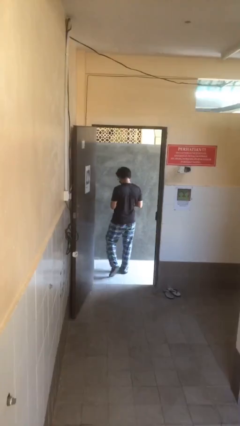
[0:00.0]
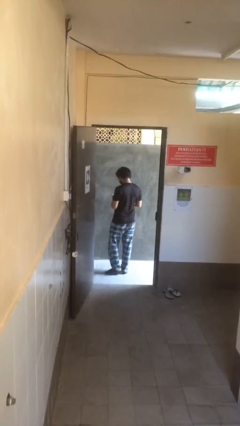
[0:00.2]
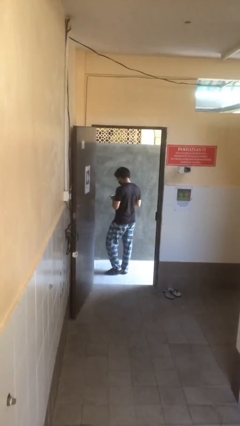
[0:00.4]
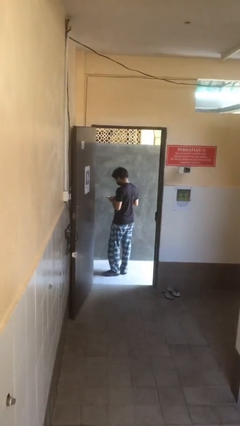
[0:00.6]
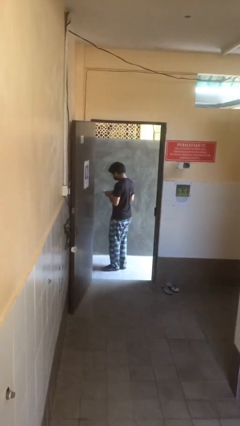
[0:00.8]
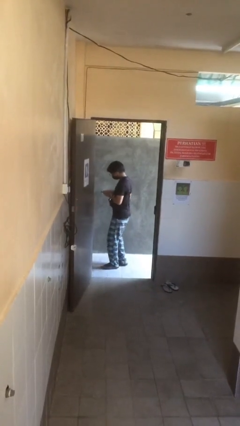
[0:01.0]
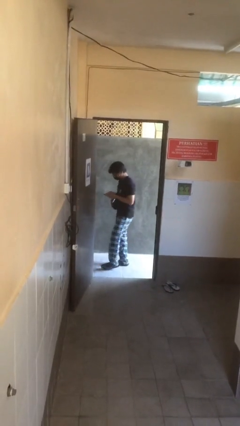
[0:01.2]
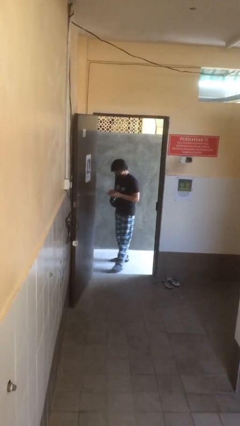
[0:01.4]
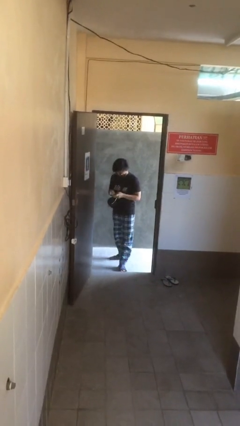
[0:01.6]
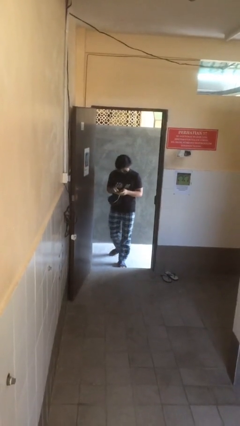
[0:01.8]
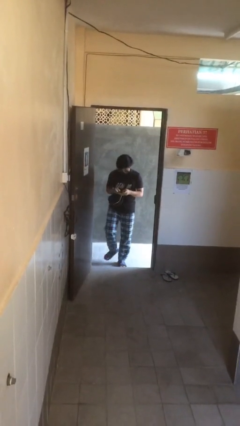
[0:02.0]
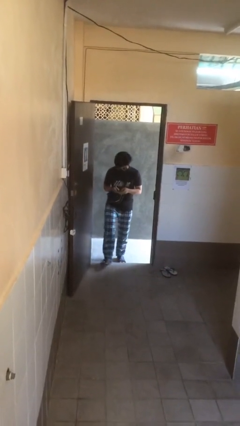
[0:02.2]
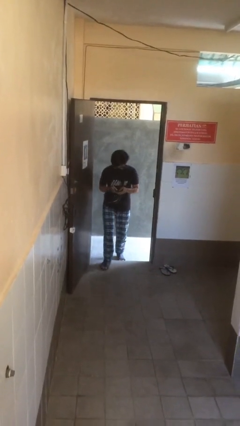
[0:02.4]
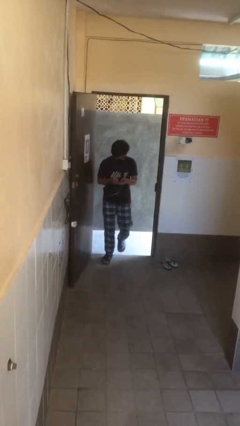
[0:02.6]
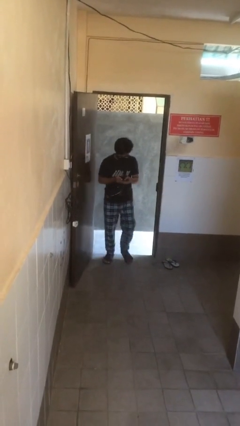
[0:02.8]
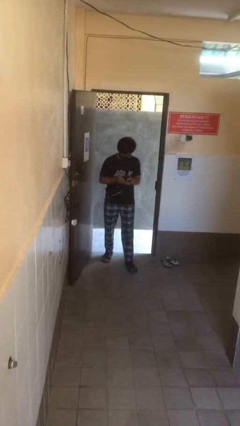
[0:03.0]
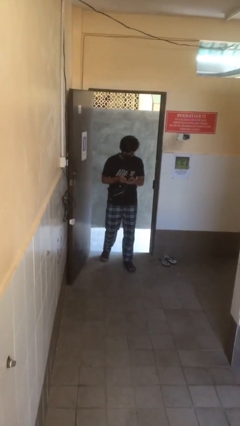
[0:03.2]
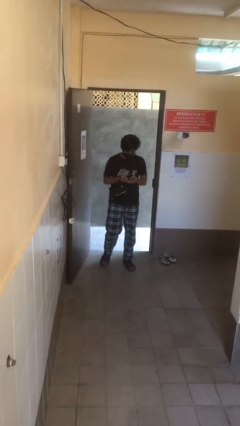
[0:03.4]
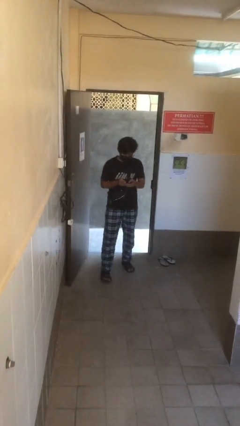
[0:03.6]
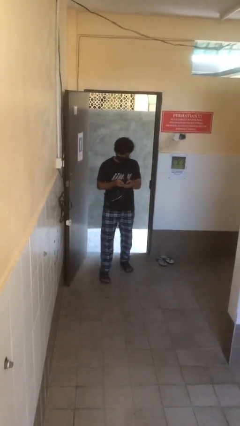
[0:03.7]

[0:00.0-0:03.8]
person enters scene through structure

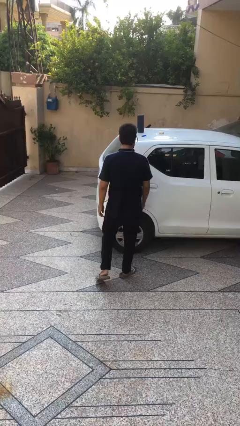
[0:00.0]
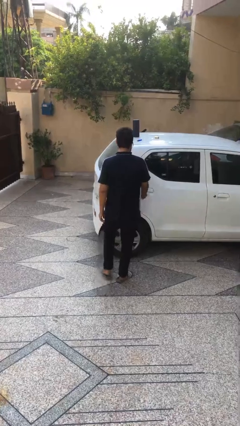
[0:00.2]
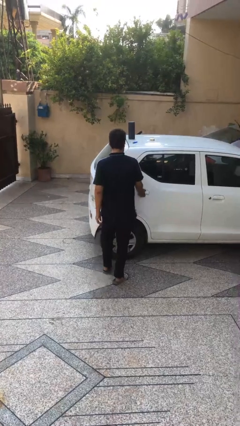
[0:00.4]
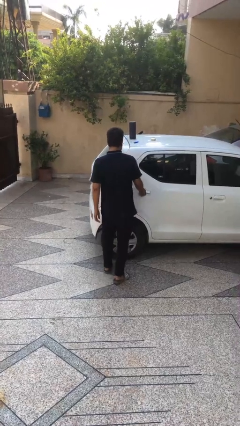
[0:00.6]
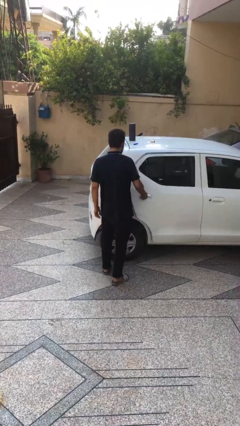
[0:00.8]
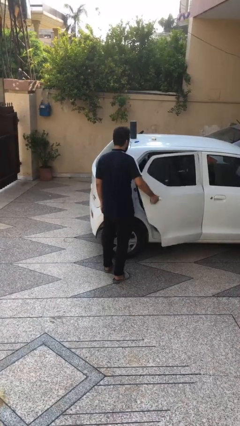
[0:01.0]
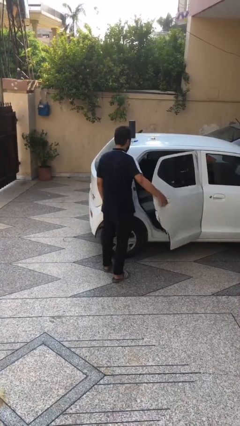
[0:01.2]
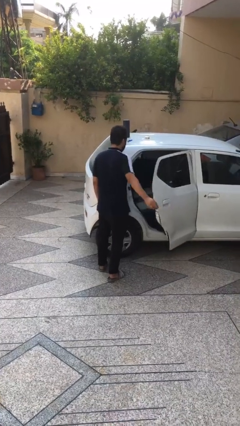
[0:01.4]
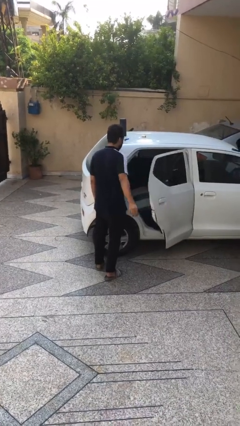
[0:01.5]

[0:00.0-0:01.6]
person opens car door

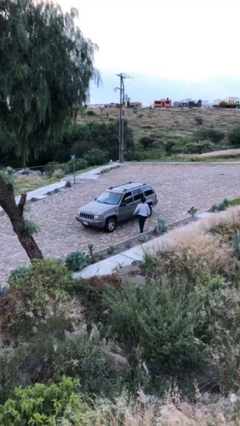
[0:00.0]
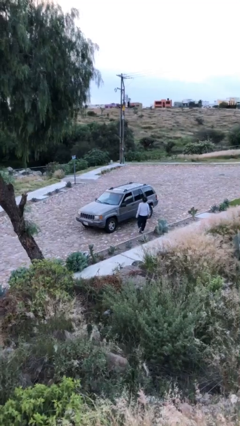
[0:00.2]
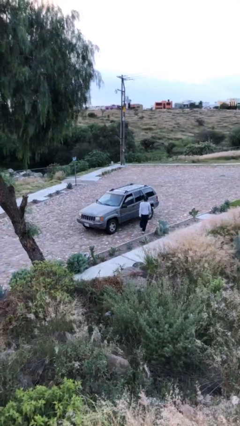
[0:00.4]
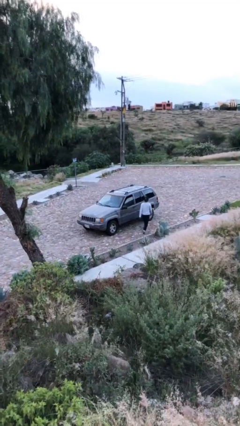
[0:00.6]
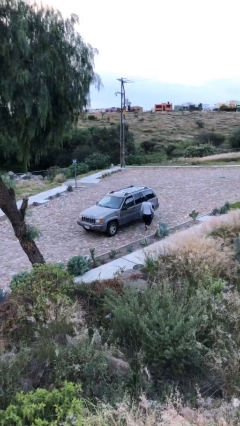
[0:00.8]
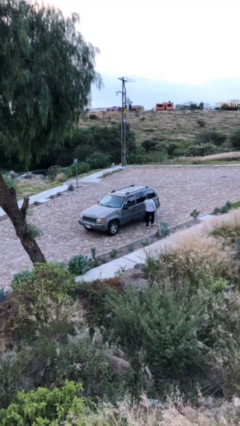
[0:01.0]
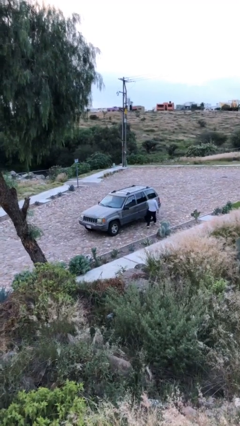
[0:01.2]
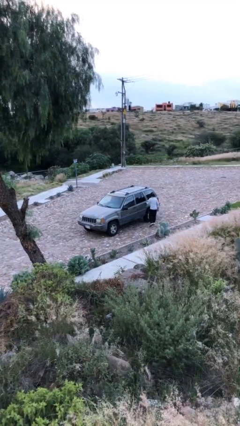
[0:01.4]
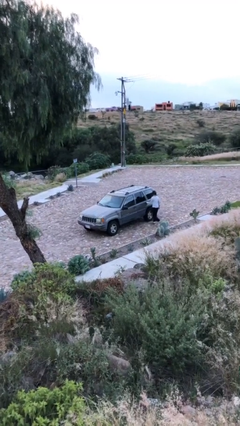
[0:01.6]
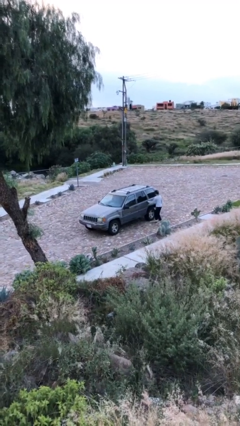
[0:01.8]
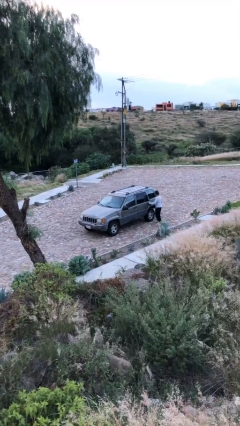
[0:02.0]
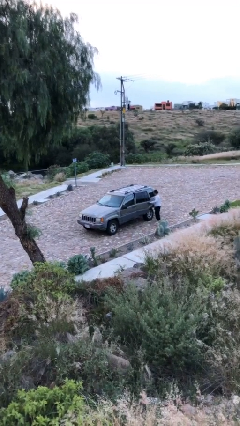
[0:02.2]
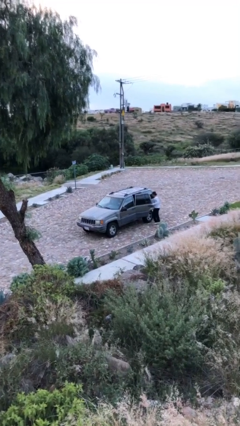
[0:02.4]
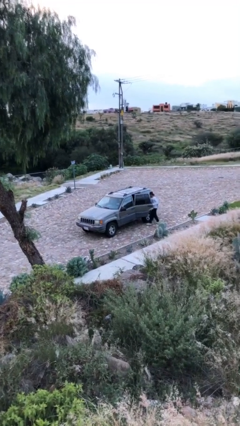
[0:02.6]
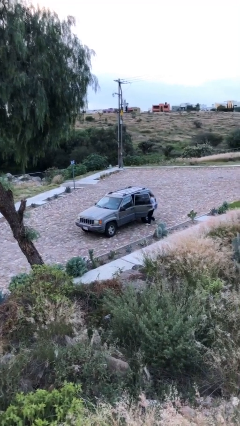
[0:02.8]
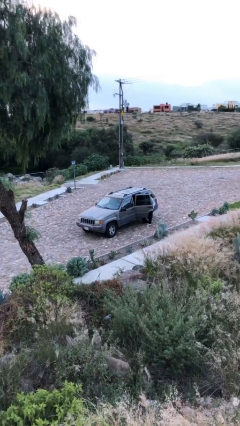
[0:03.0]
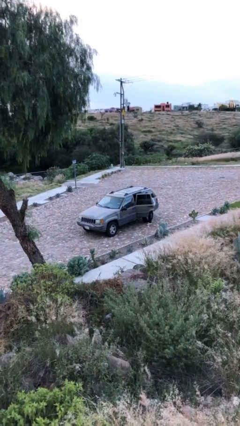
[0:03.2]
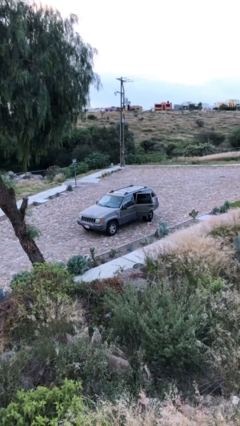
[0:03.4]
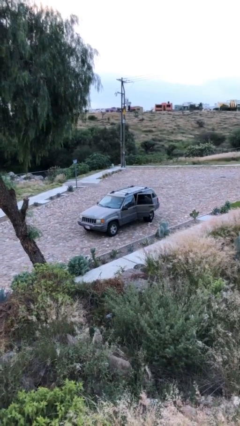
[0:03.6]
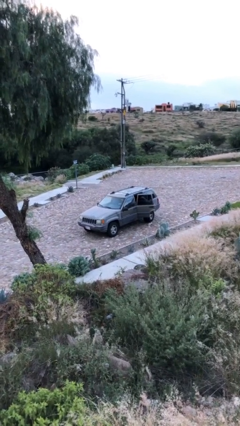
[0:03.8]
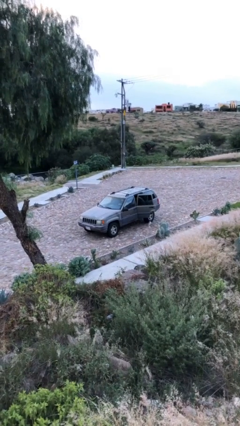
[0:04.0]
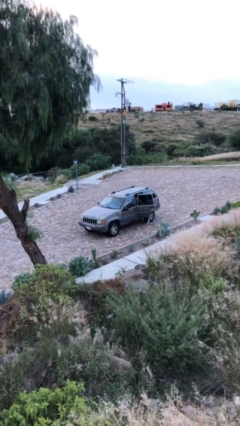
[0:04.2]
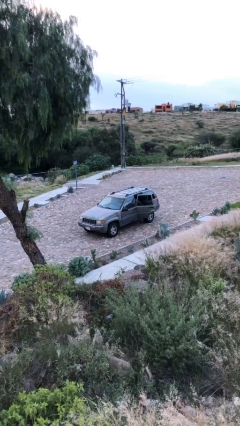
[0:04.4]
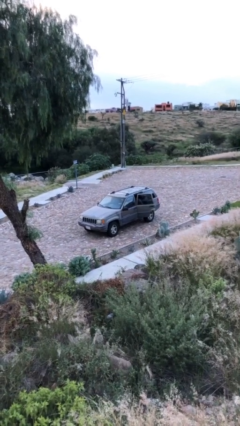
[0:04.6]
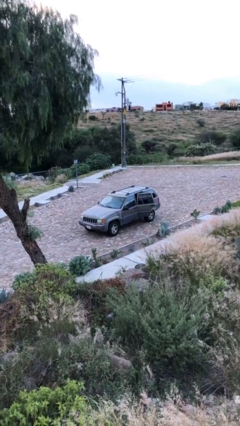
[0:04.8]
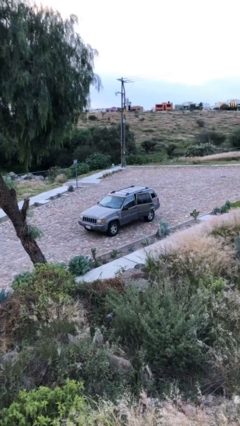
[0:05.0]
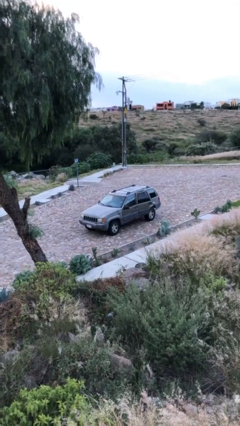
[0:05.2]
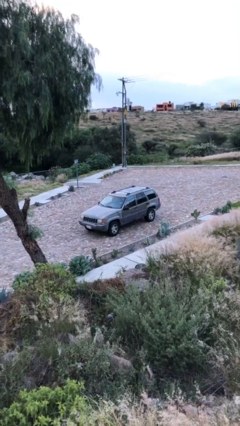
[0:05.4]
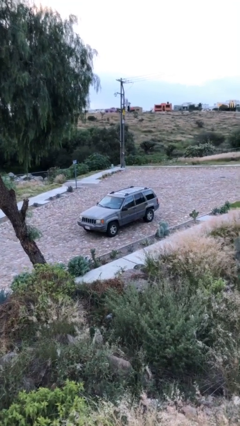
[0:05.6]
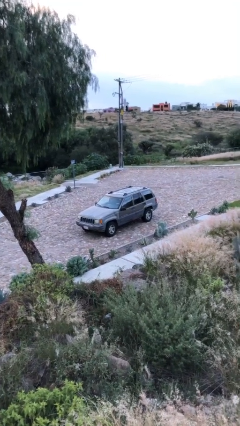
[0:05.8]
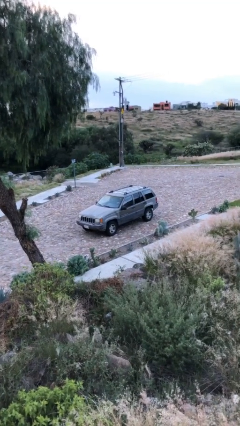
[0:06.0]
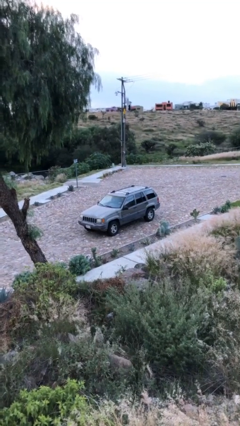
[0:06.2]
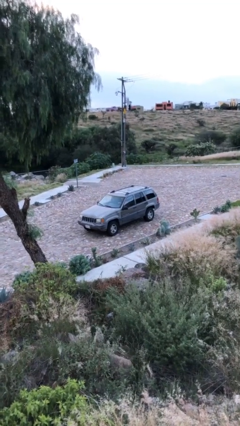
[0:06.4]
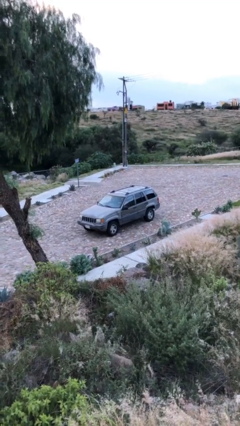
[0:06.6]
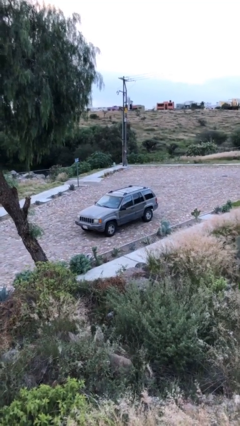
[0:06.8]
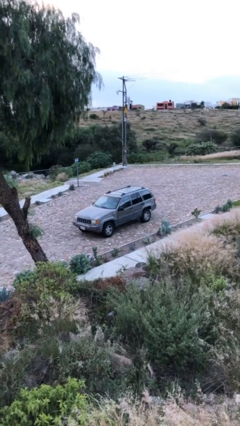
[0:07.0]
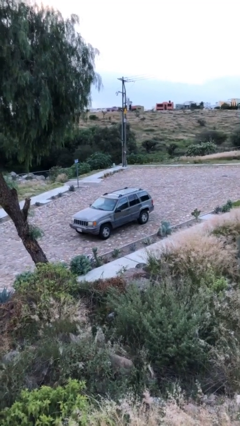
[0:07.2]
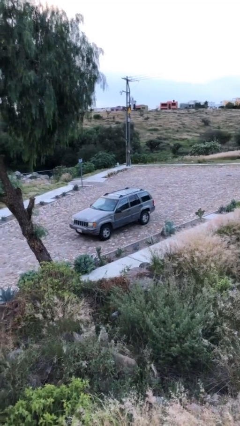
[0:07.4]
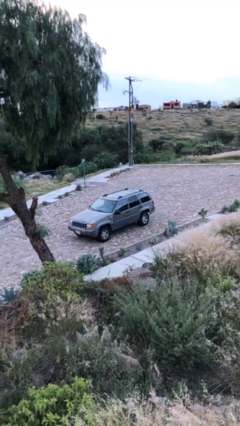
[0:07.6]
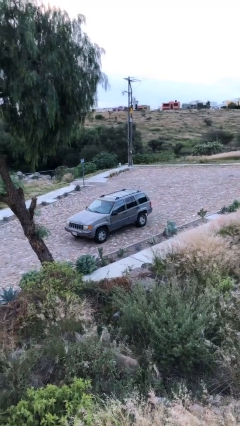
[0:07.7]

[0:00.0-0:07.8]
car picks up person

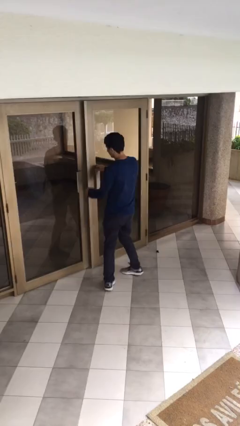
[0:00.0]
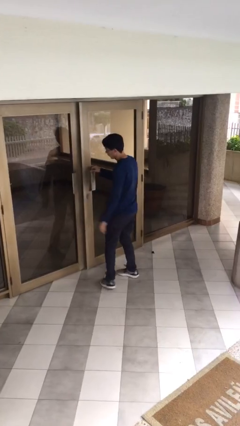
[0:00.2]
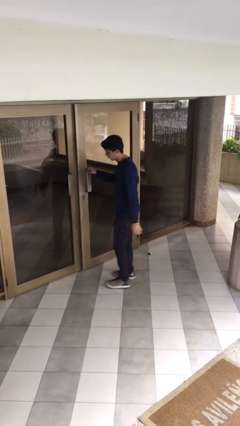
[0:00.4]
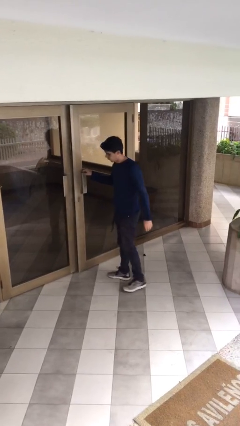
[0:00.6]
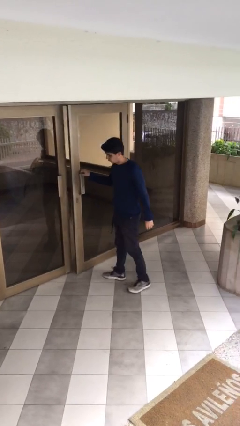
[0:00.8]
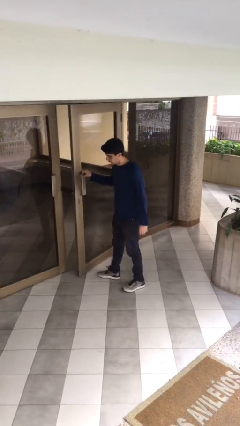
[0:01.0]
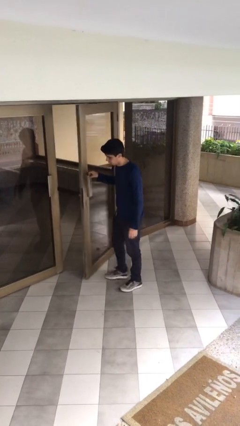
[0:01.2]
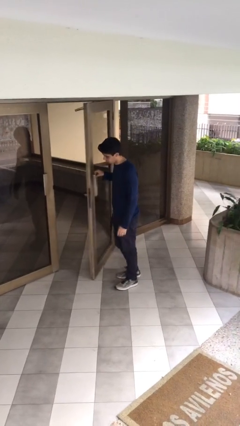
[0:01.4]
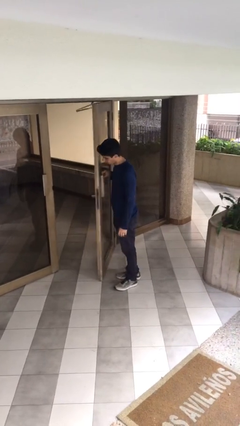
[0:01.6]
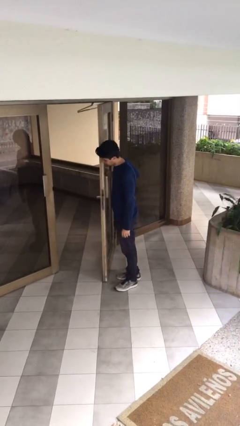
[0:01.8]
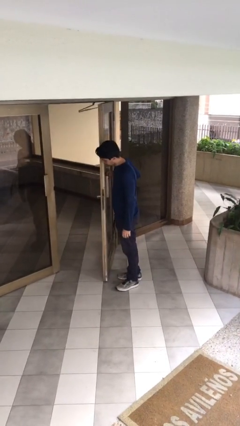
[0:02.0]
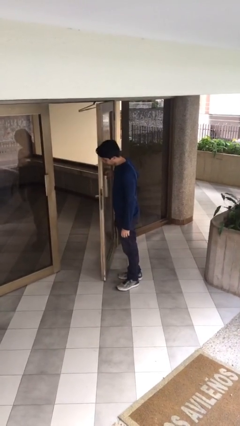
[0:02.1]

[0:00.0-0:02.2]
person opens facility door

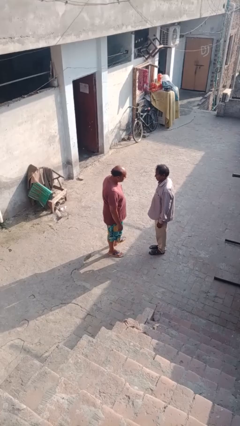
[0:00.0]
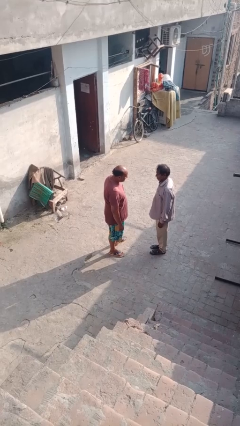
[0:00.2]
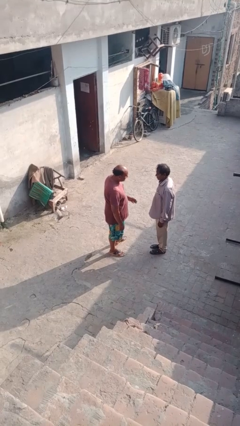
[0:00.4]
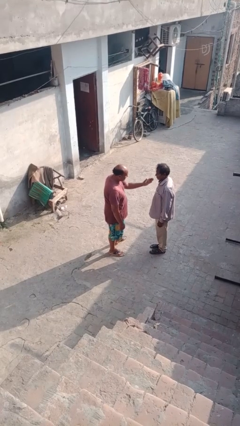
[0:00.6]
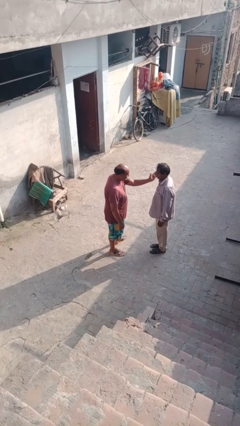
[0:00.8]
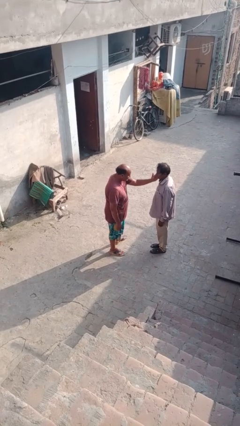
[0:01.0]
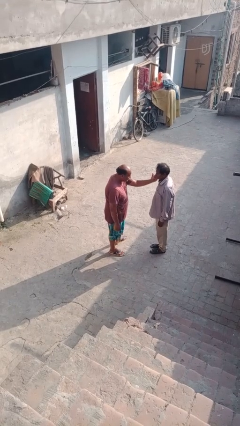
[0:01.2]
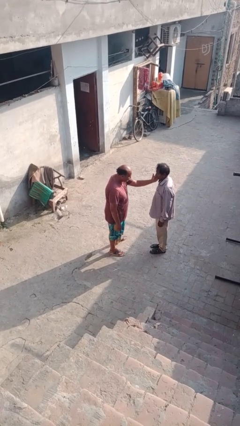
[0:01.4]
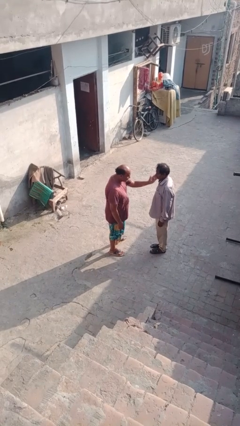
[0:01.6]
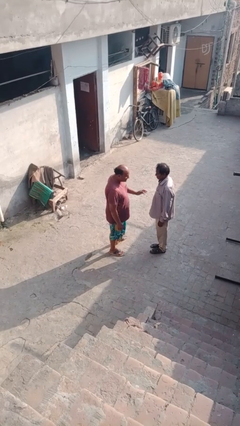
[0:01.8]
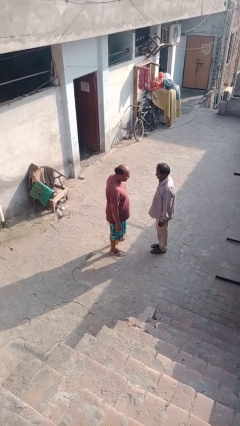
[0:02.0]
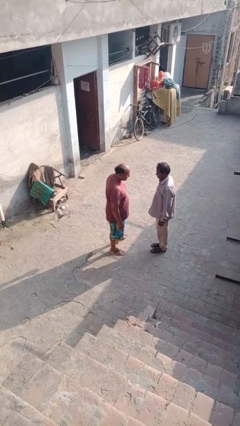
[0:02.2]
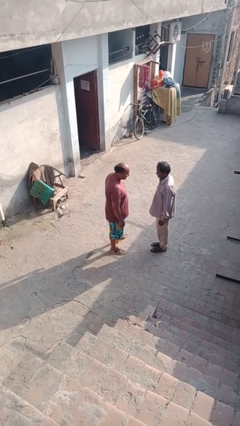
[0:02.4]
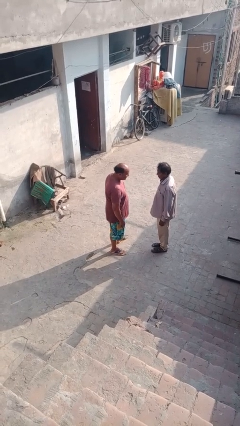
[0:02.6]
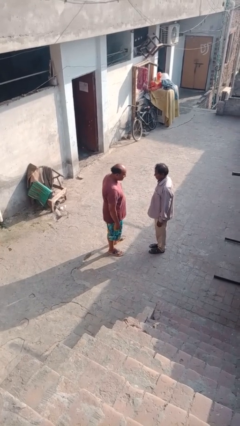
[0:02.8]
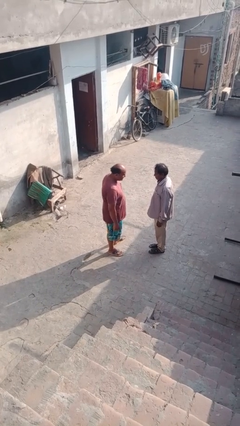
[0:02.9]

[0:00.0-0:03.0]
person touches face of person
